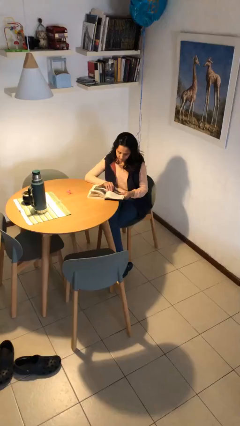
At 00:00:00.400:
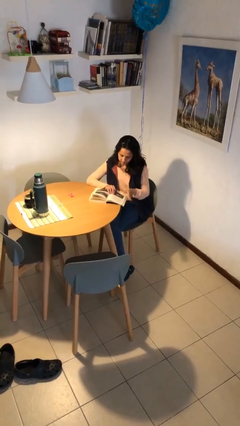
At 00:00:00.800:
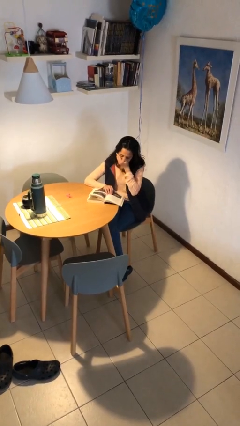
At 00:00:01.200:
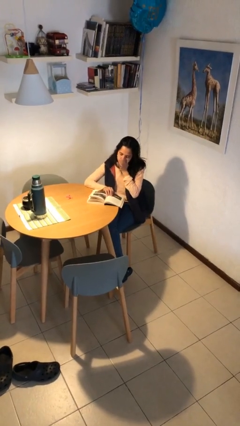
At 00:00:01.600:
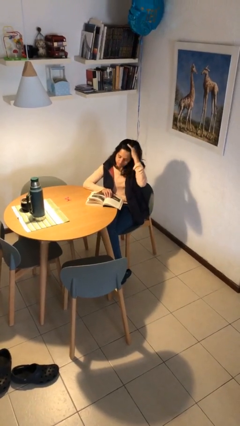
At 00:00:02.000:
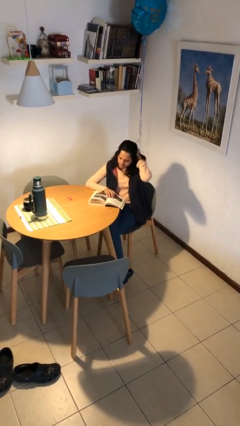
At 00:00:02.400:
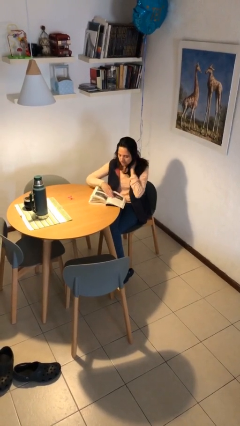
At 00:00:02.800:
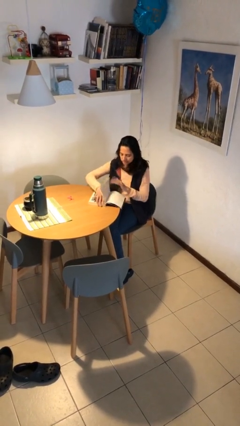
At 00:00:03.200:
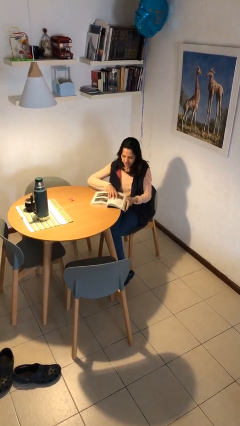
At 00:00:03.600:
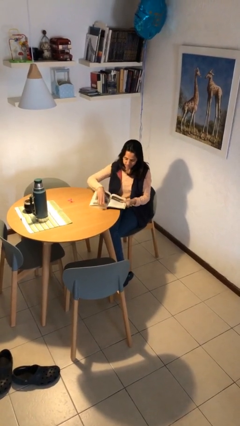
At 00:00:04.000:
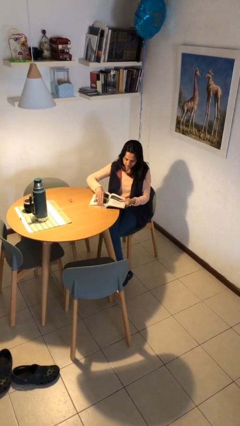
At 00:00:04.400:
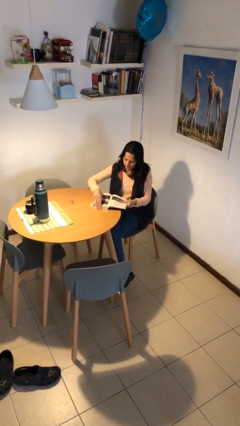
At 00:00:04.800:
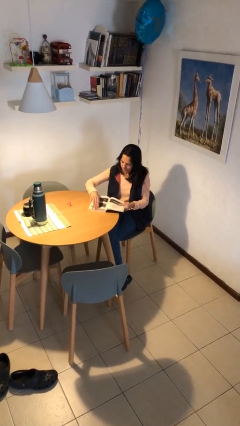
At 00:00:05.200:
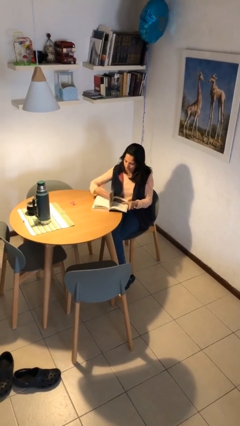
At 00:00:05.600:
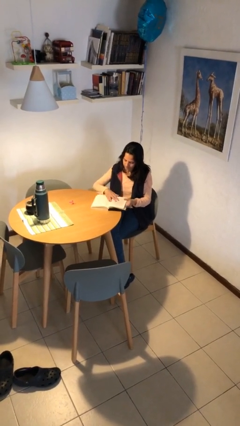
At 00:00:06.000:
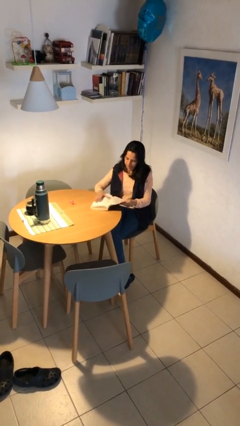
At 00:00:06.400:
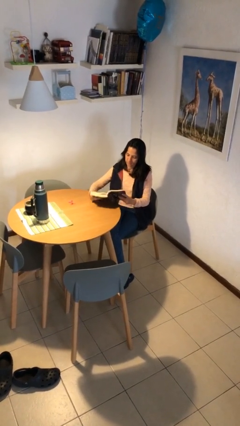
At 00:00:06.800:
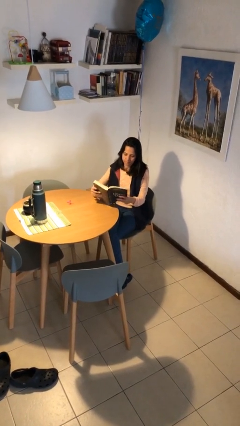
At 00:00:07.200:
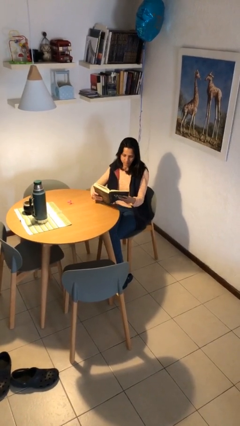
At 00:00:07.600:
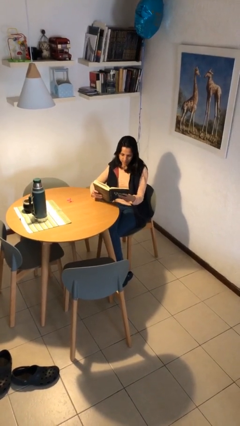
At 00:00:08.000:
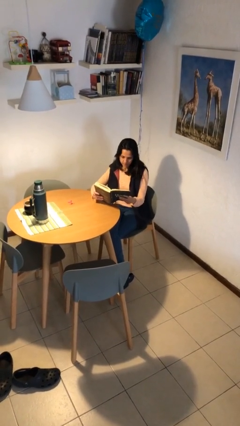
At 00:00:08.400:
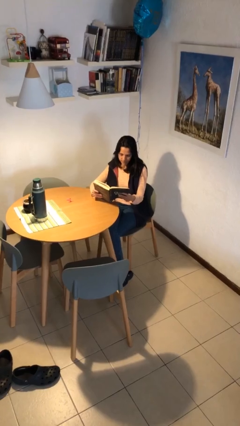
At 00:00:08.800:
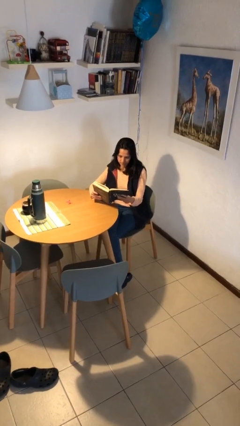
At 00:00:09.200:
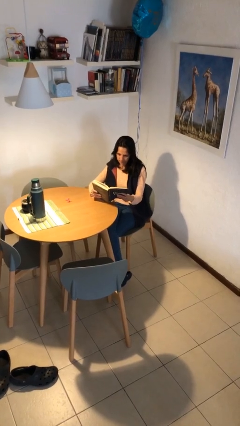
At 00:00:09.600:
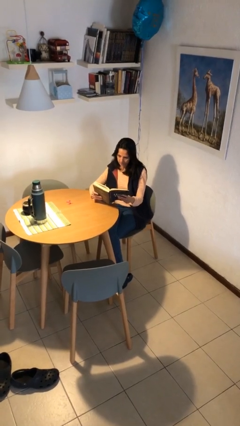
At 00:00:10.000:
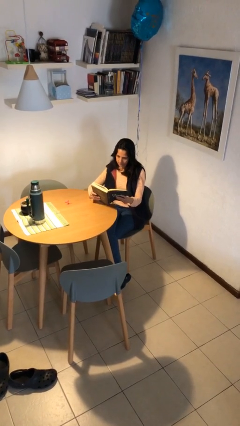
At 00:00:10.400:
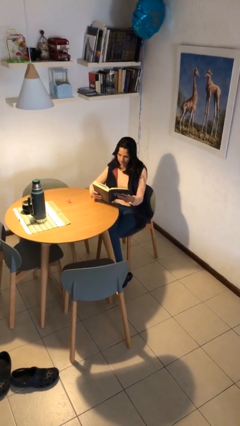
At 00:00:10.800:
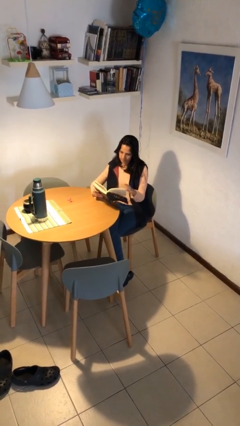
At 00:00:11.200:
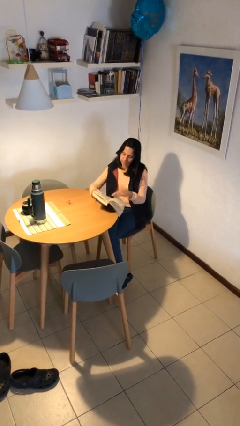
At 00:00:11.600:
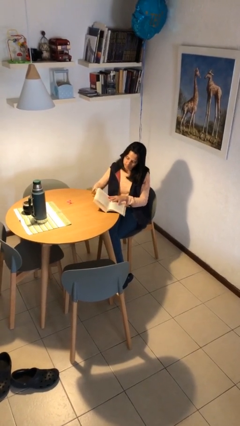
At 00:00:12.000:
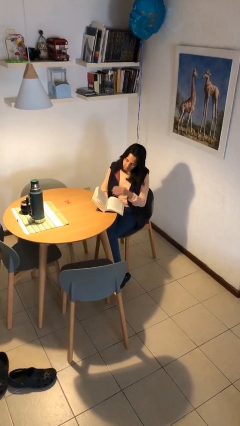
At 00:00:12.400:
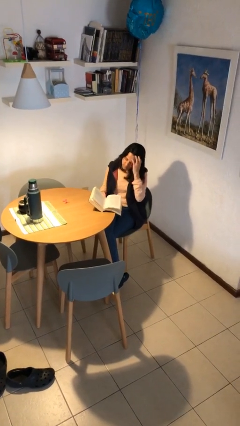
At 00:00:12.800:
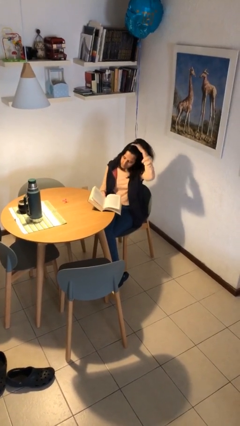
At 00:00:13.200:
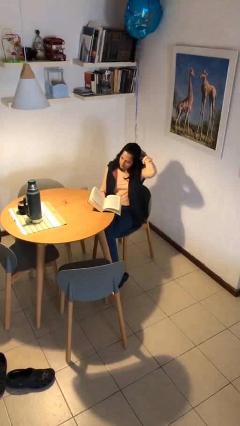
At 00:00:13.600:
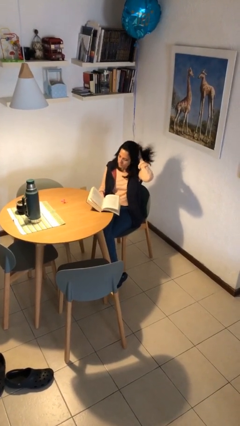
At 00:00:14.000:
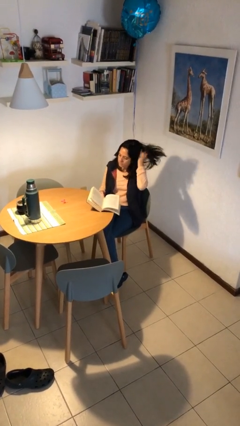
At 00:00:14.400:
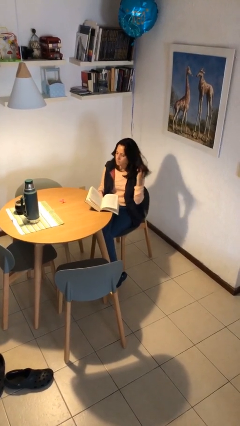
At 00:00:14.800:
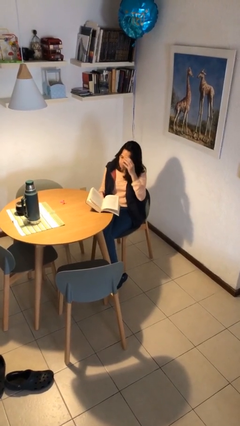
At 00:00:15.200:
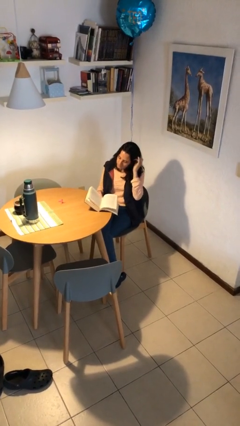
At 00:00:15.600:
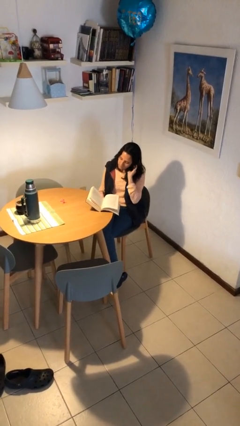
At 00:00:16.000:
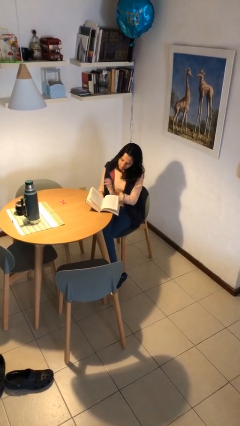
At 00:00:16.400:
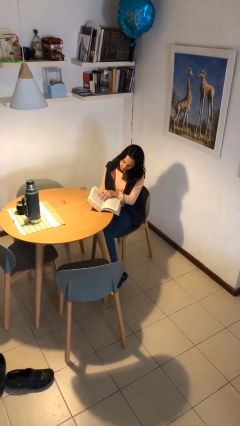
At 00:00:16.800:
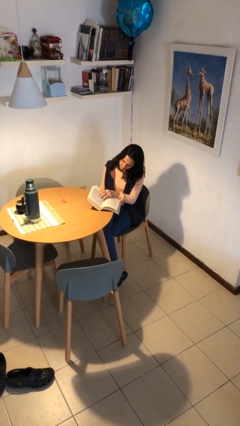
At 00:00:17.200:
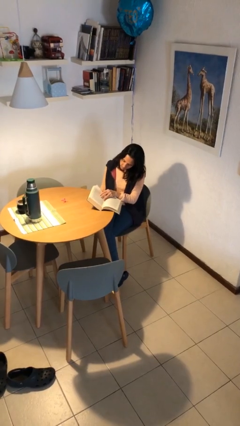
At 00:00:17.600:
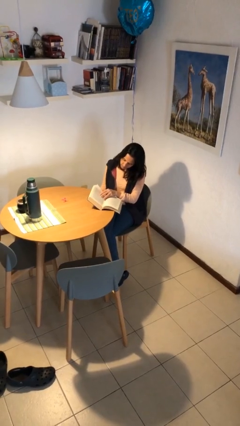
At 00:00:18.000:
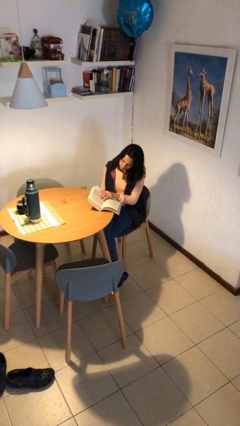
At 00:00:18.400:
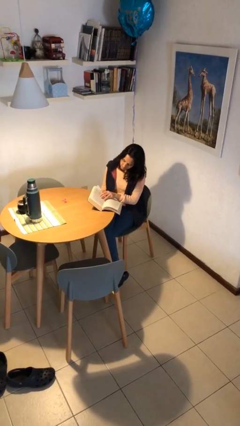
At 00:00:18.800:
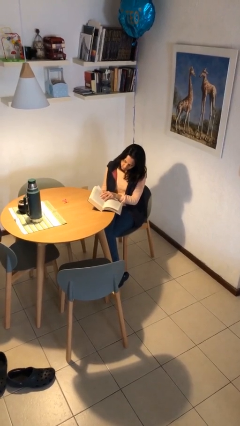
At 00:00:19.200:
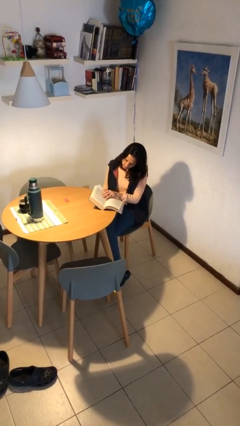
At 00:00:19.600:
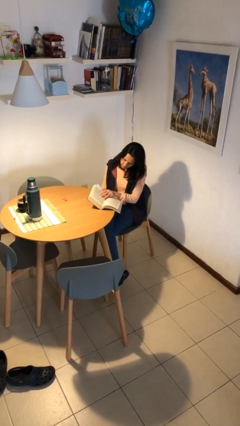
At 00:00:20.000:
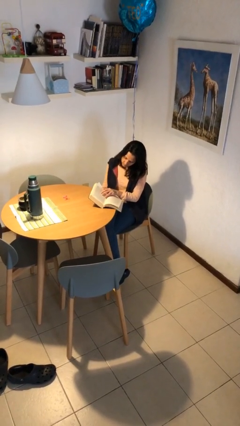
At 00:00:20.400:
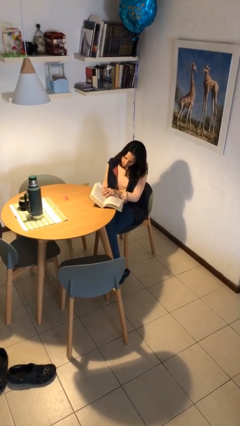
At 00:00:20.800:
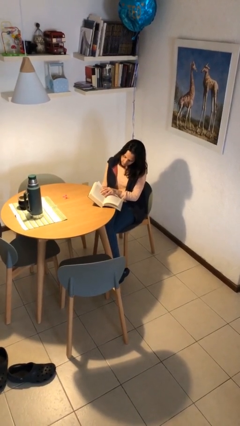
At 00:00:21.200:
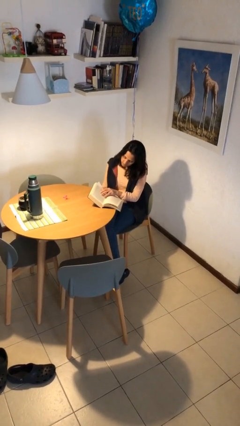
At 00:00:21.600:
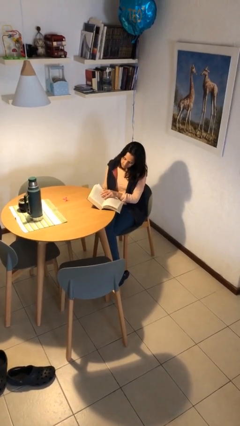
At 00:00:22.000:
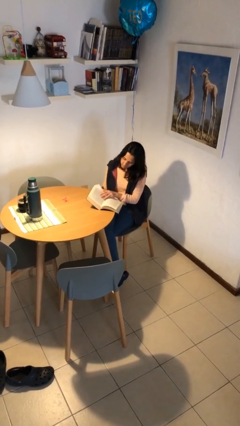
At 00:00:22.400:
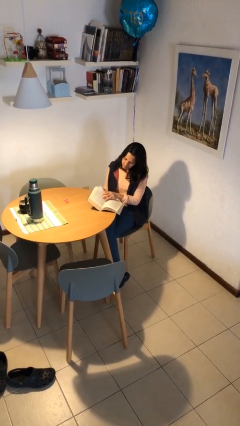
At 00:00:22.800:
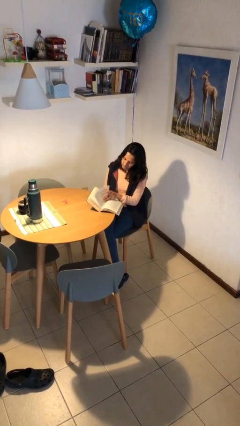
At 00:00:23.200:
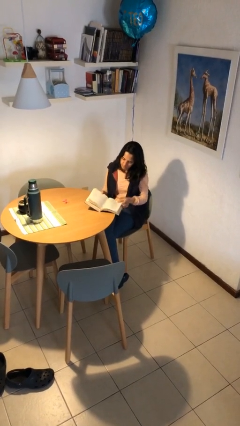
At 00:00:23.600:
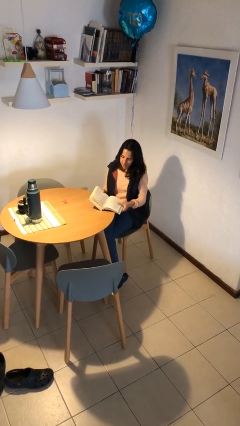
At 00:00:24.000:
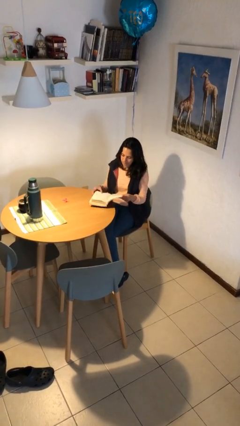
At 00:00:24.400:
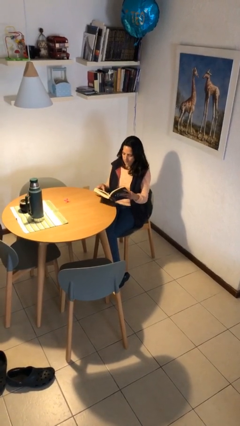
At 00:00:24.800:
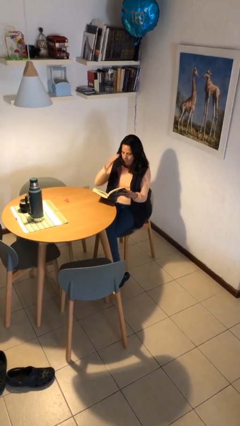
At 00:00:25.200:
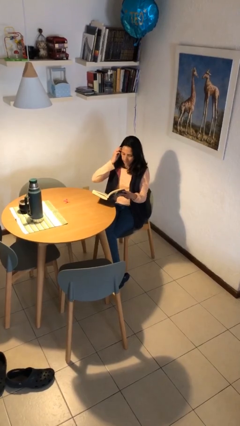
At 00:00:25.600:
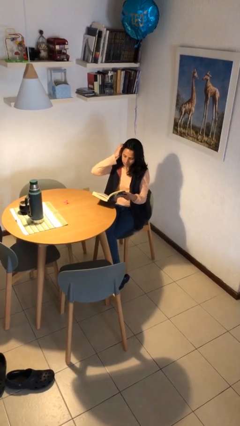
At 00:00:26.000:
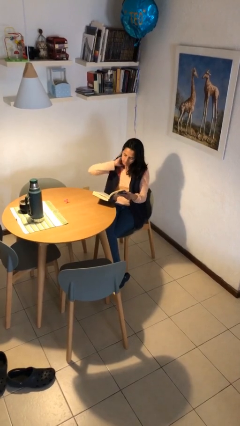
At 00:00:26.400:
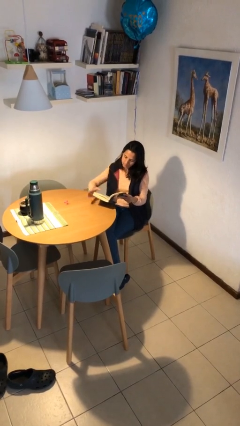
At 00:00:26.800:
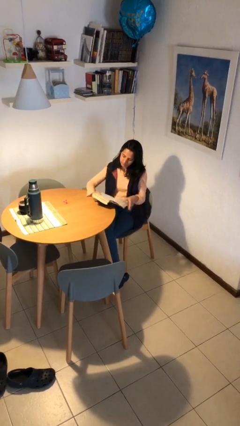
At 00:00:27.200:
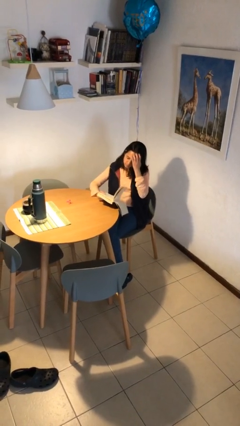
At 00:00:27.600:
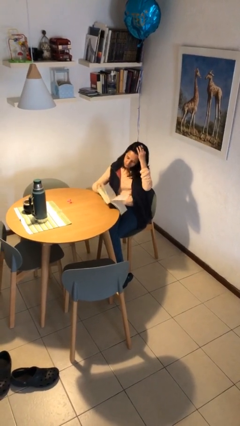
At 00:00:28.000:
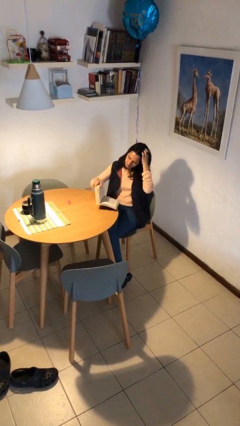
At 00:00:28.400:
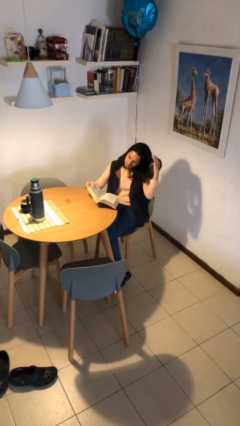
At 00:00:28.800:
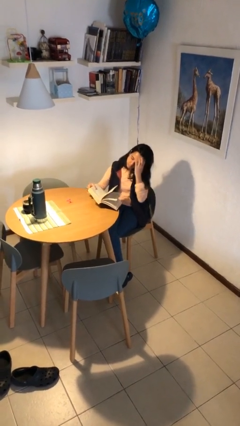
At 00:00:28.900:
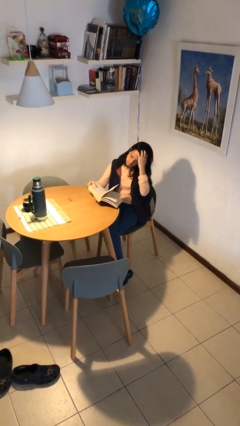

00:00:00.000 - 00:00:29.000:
person reads document

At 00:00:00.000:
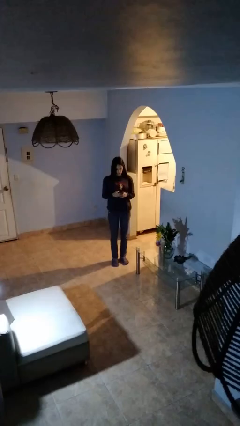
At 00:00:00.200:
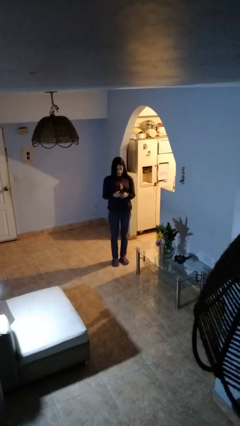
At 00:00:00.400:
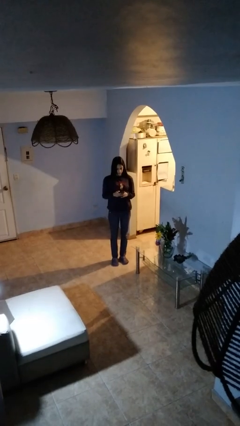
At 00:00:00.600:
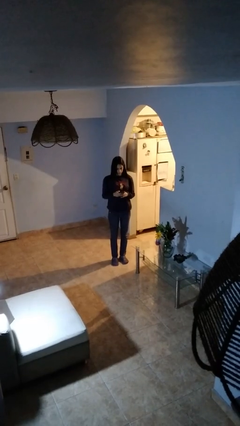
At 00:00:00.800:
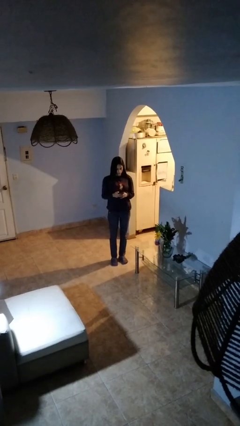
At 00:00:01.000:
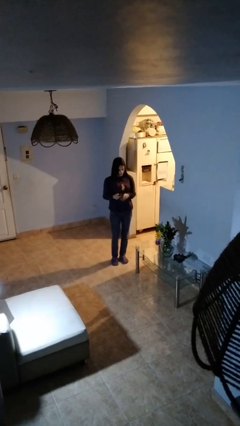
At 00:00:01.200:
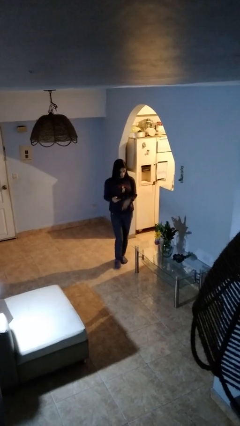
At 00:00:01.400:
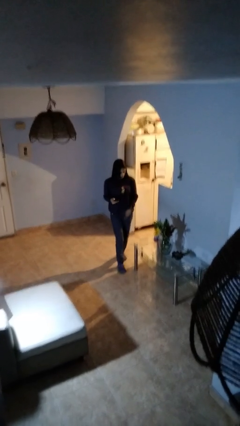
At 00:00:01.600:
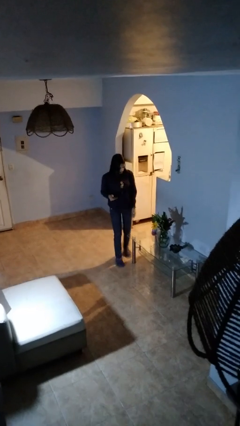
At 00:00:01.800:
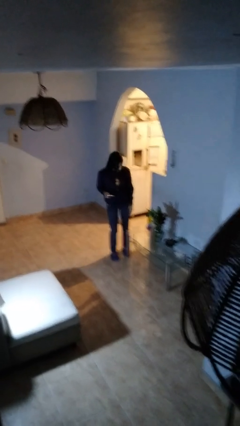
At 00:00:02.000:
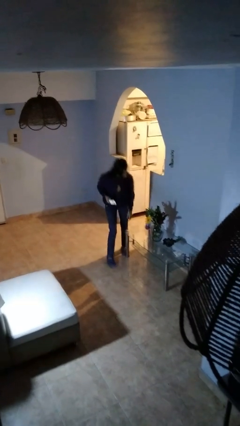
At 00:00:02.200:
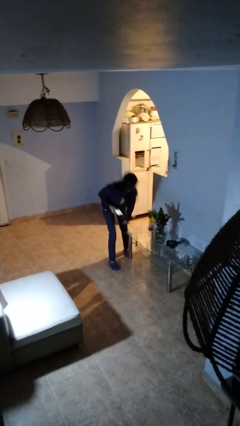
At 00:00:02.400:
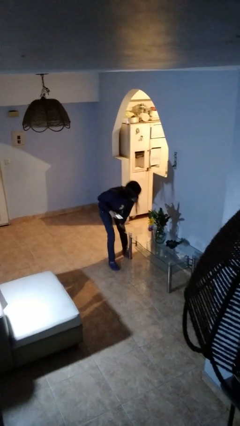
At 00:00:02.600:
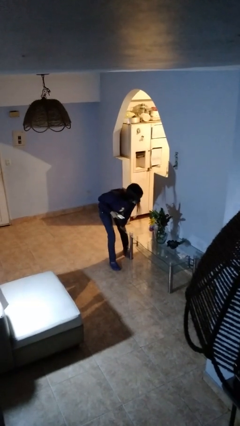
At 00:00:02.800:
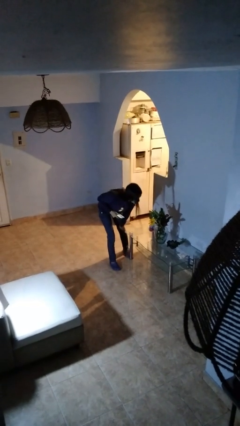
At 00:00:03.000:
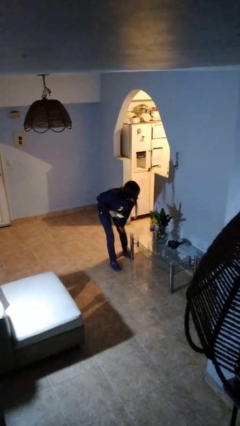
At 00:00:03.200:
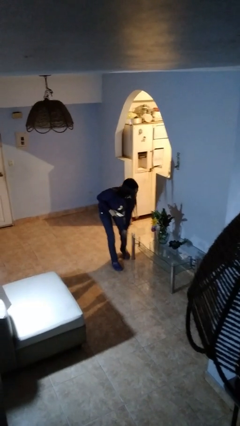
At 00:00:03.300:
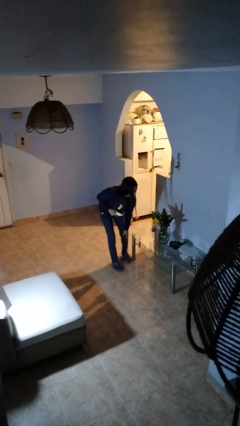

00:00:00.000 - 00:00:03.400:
person bumps into table
